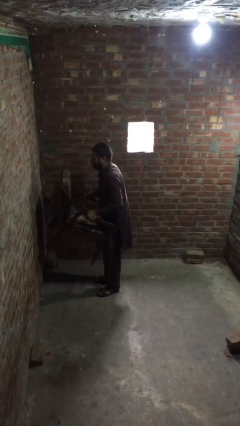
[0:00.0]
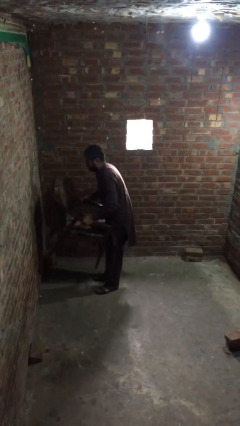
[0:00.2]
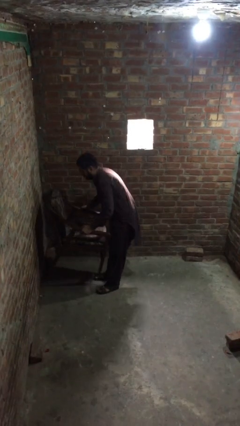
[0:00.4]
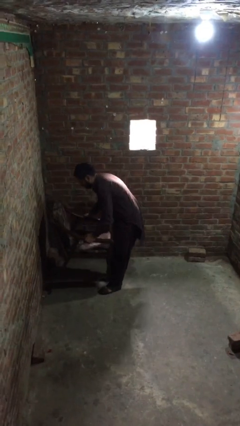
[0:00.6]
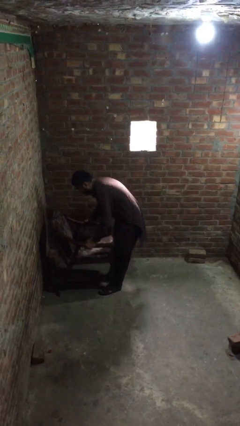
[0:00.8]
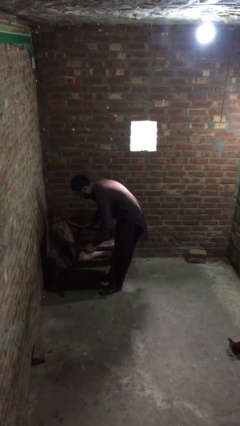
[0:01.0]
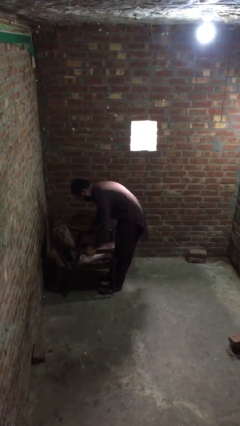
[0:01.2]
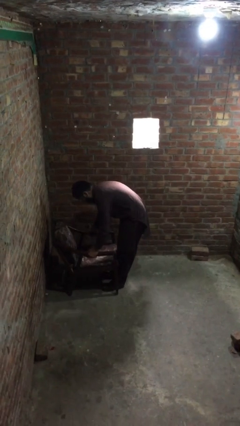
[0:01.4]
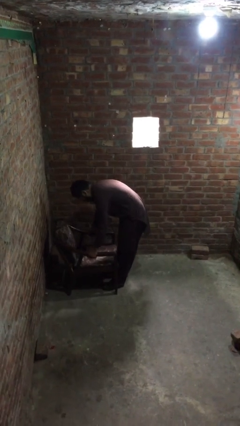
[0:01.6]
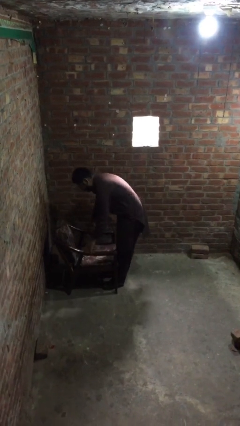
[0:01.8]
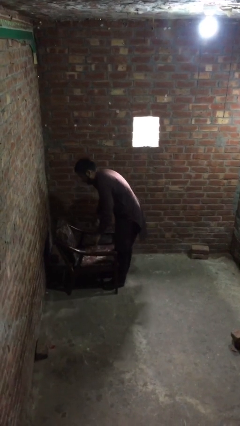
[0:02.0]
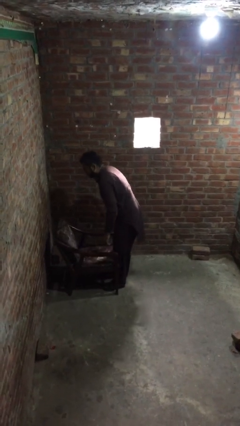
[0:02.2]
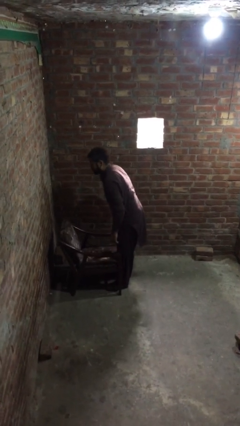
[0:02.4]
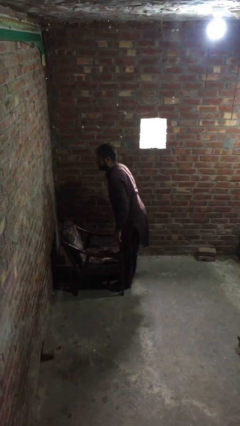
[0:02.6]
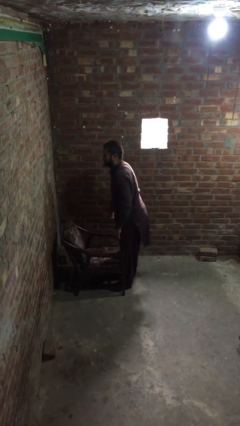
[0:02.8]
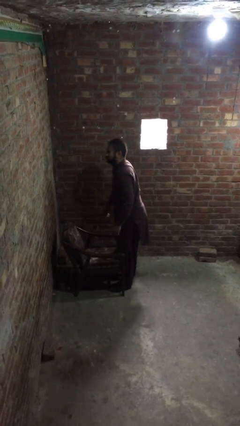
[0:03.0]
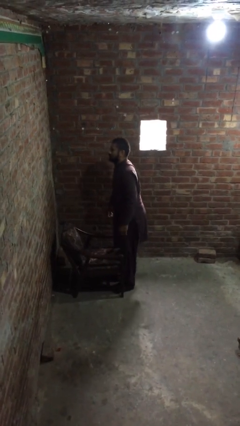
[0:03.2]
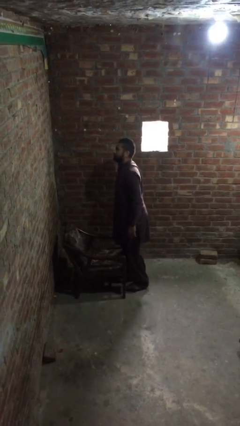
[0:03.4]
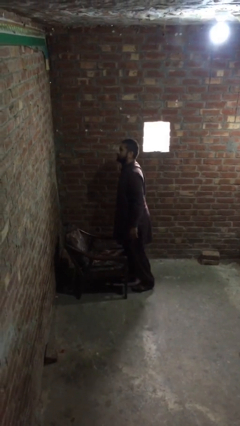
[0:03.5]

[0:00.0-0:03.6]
person puts down object on floor

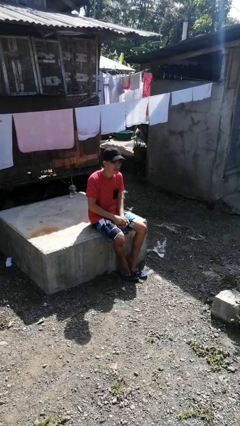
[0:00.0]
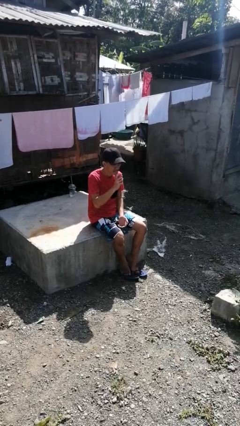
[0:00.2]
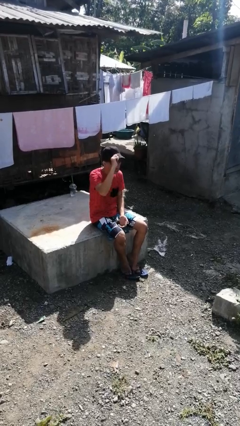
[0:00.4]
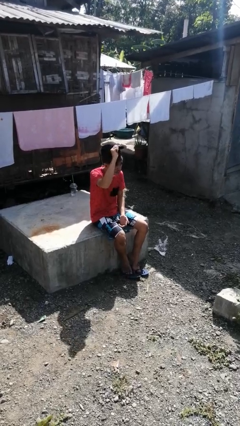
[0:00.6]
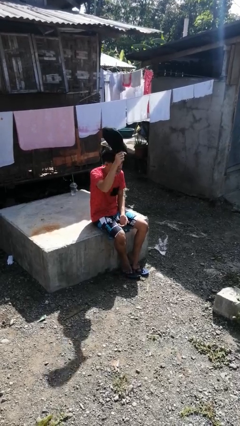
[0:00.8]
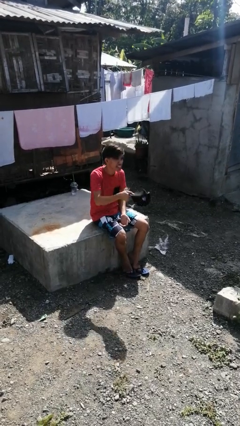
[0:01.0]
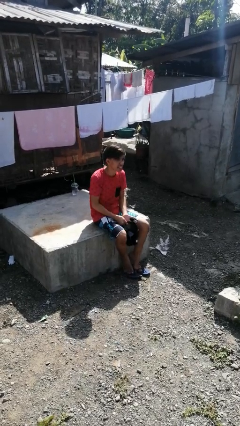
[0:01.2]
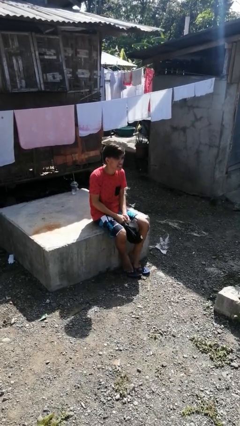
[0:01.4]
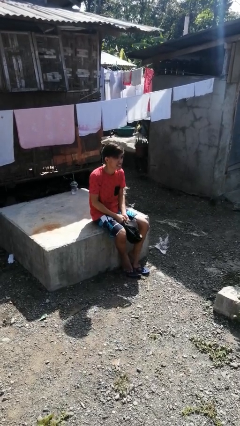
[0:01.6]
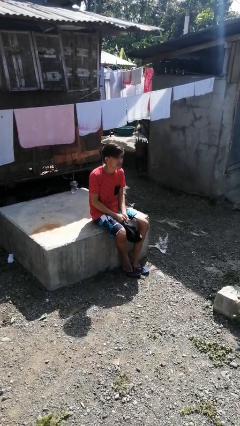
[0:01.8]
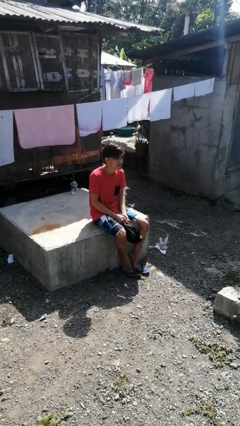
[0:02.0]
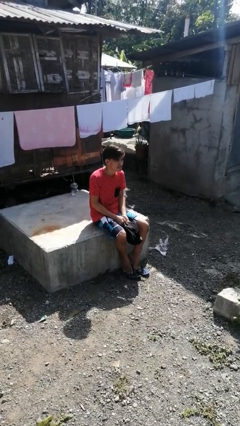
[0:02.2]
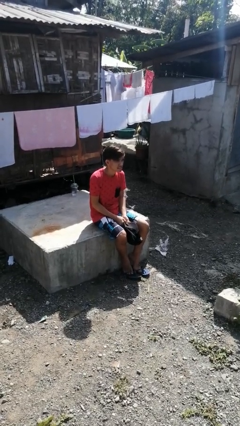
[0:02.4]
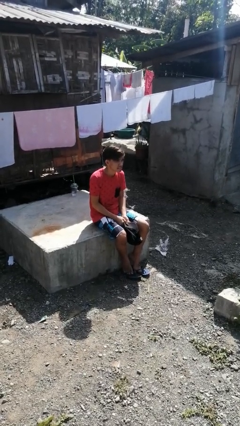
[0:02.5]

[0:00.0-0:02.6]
person takes off hat

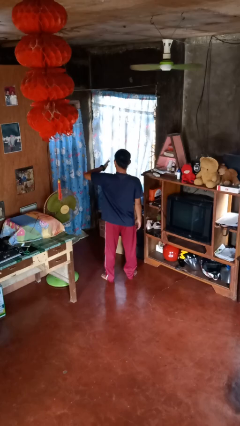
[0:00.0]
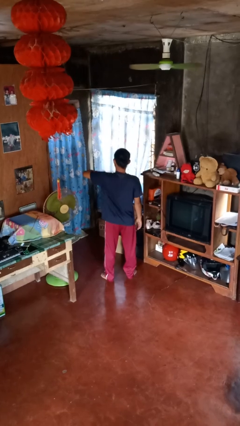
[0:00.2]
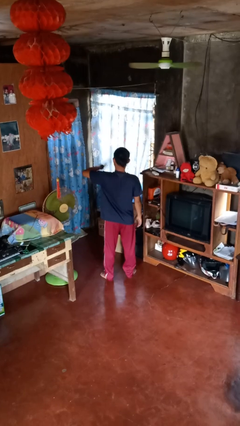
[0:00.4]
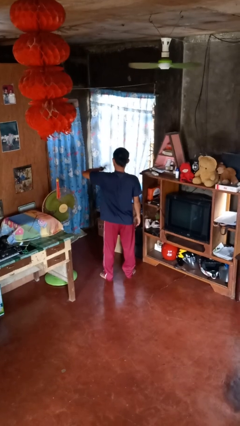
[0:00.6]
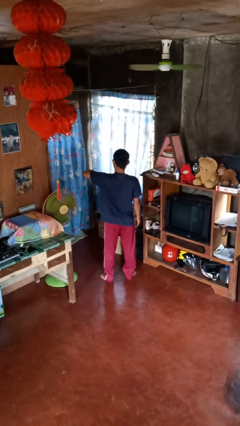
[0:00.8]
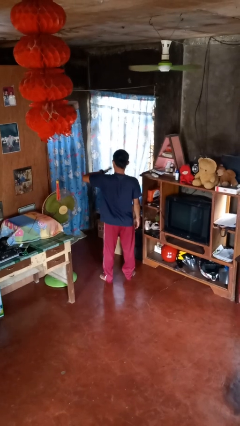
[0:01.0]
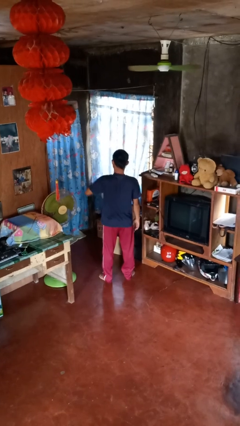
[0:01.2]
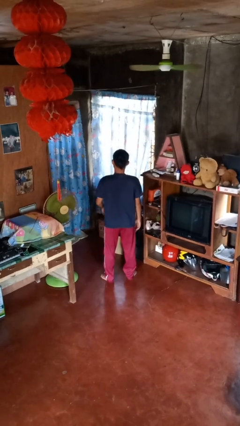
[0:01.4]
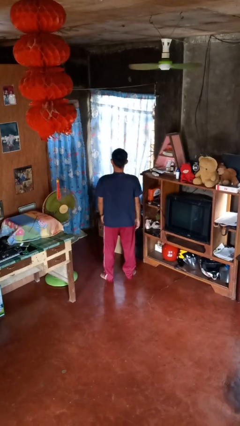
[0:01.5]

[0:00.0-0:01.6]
person drums on chest

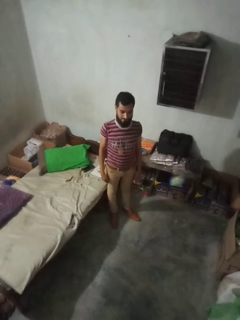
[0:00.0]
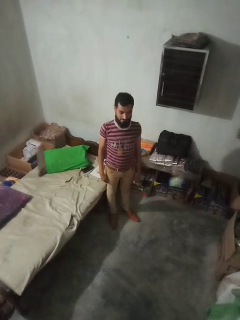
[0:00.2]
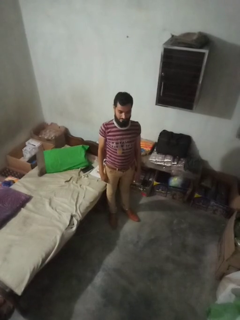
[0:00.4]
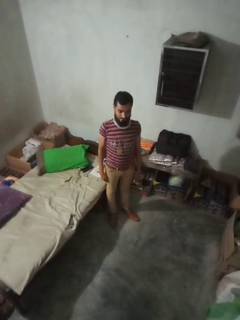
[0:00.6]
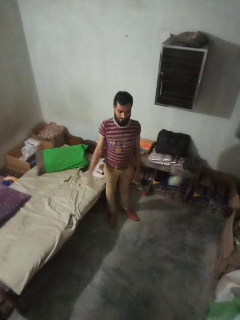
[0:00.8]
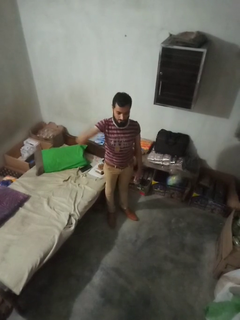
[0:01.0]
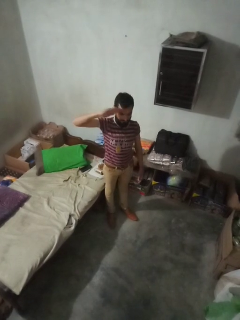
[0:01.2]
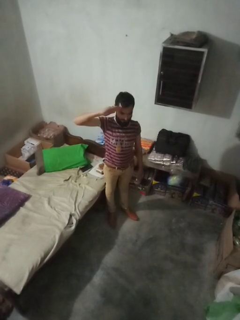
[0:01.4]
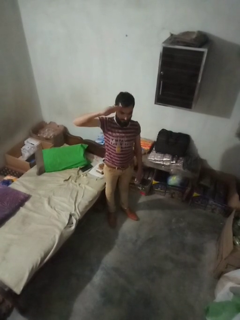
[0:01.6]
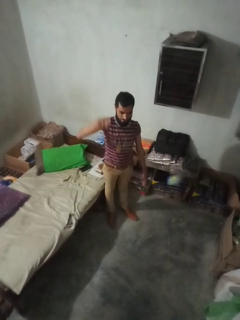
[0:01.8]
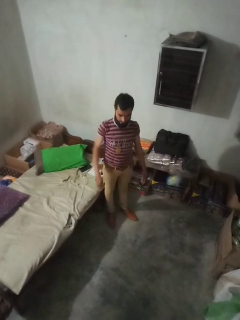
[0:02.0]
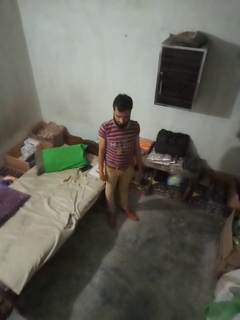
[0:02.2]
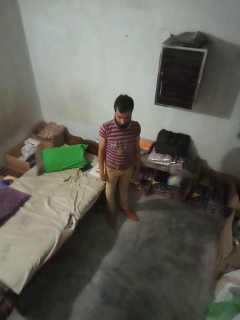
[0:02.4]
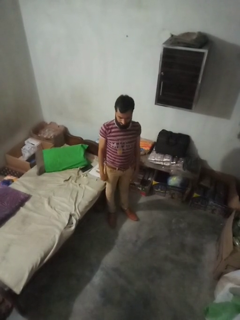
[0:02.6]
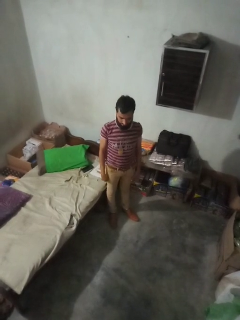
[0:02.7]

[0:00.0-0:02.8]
person salutes

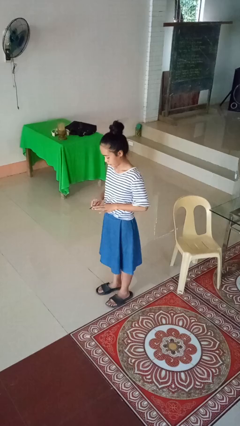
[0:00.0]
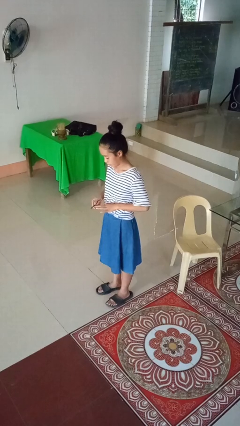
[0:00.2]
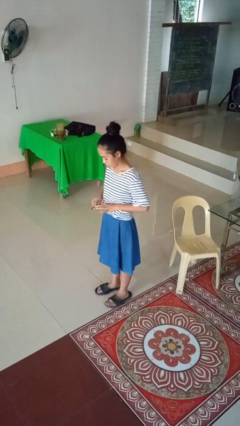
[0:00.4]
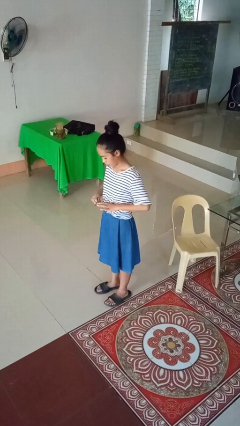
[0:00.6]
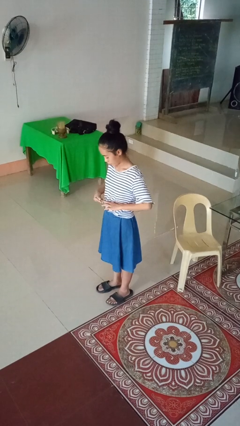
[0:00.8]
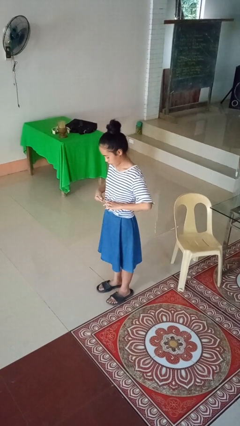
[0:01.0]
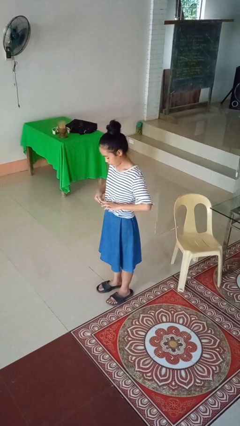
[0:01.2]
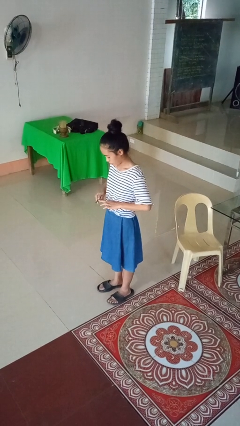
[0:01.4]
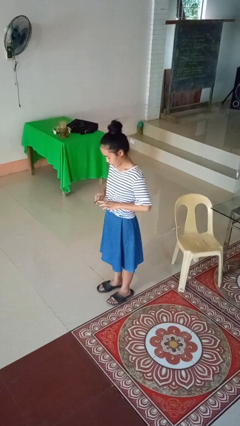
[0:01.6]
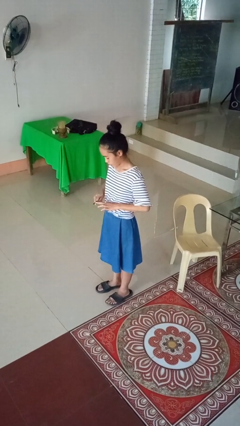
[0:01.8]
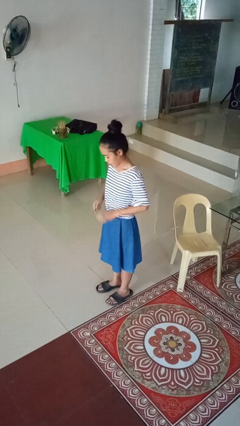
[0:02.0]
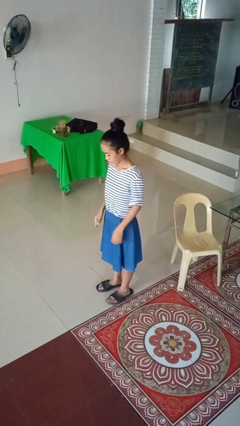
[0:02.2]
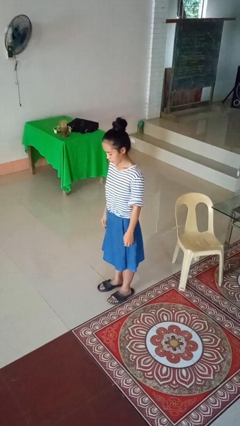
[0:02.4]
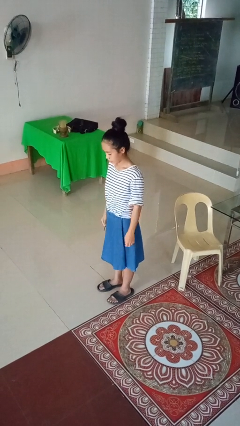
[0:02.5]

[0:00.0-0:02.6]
person files fingernails

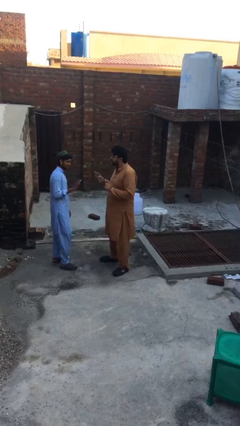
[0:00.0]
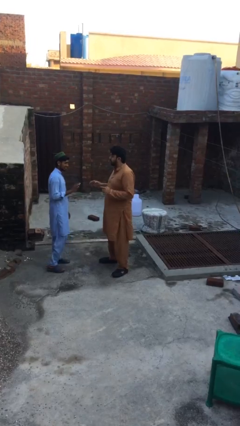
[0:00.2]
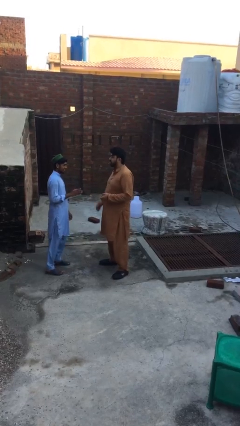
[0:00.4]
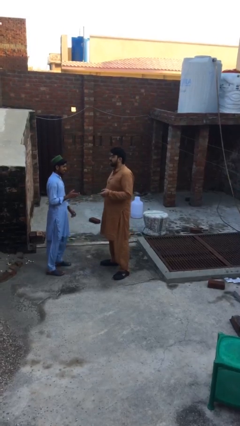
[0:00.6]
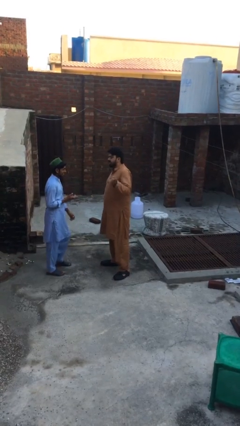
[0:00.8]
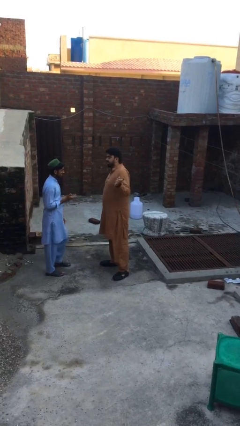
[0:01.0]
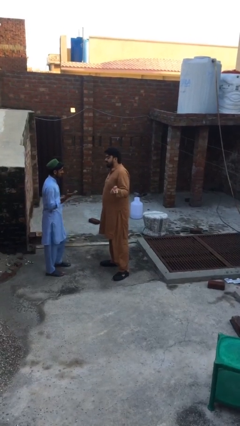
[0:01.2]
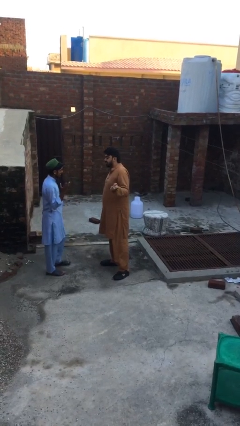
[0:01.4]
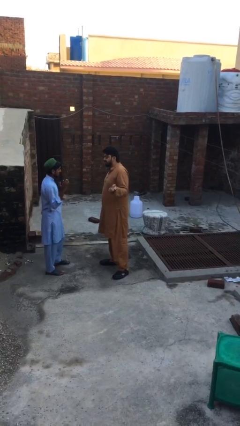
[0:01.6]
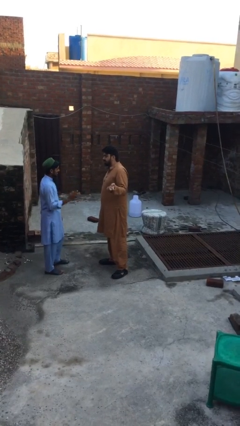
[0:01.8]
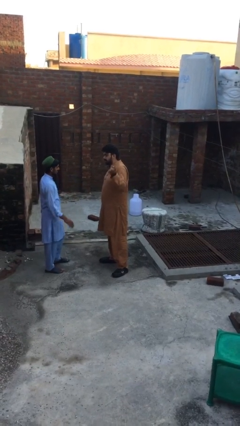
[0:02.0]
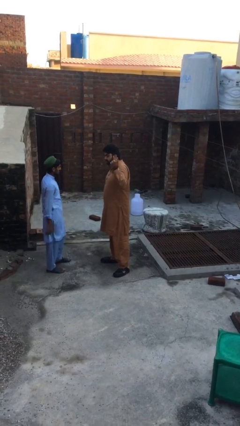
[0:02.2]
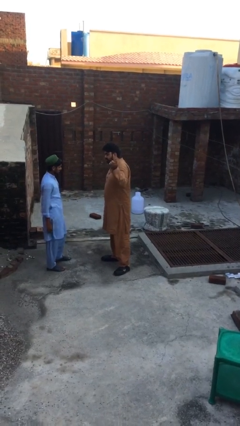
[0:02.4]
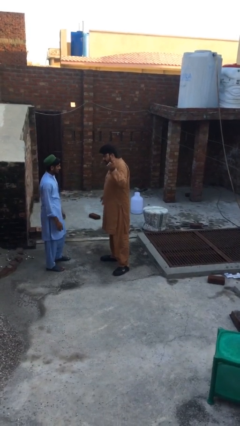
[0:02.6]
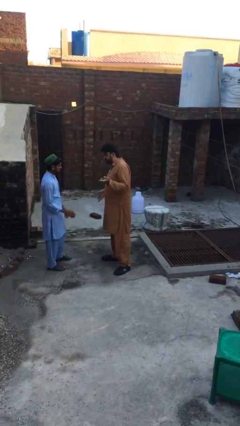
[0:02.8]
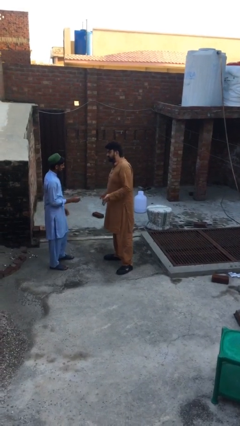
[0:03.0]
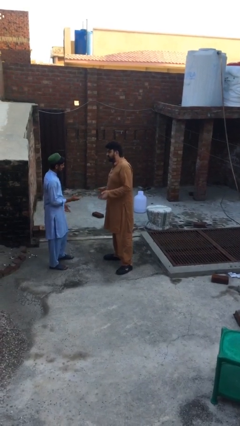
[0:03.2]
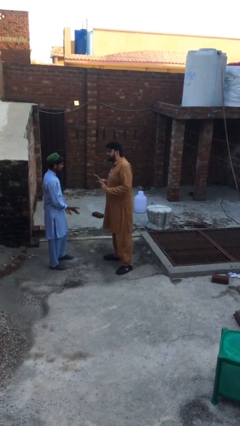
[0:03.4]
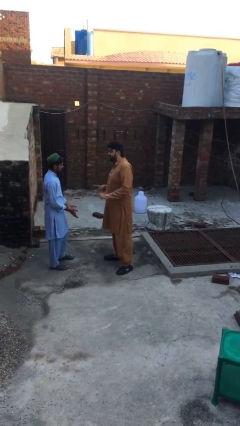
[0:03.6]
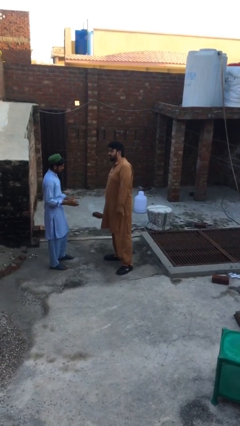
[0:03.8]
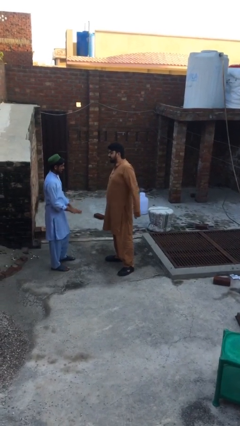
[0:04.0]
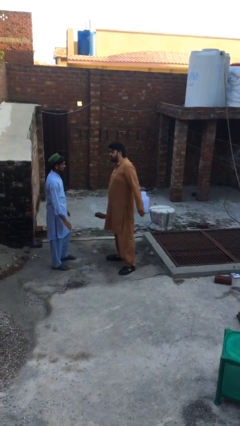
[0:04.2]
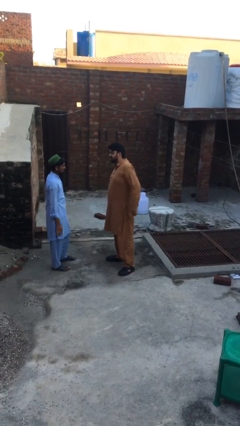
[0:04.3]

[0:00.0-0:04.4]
person talks to person
